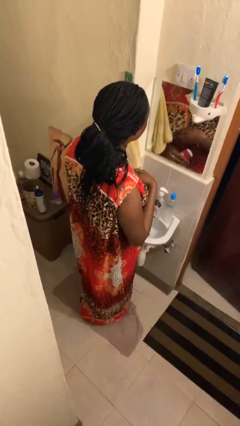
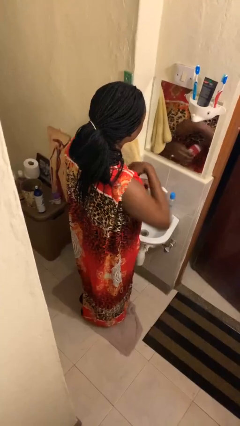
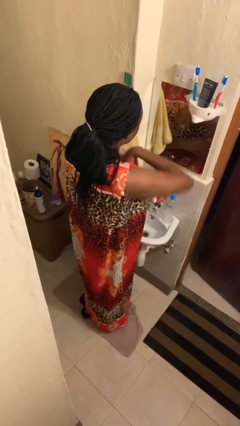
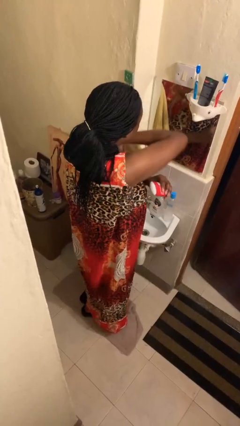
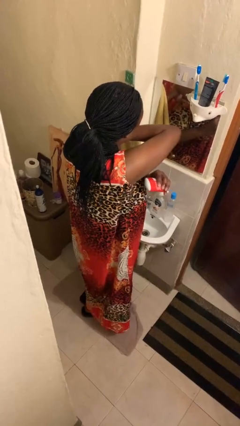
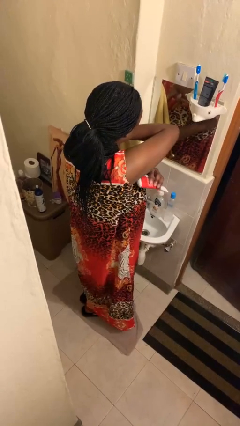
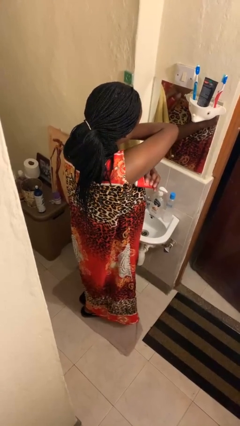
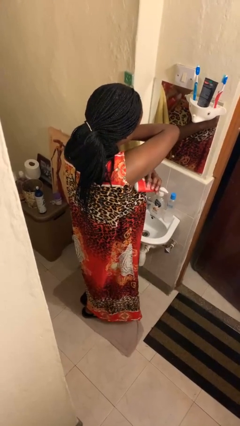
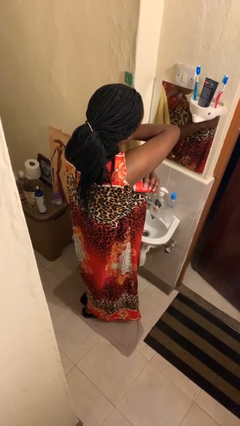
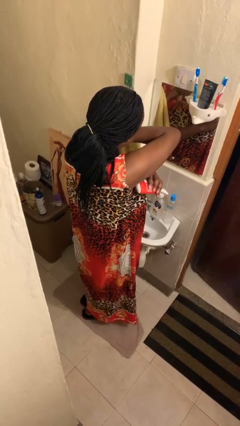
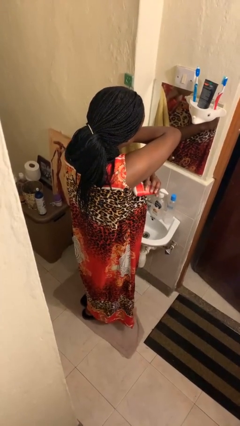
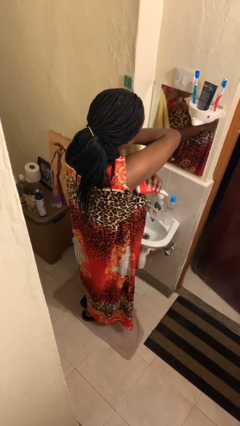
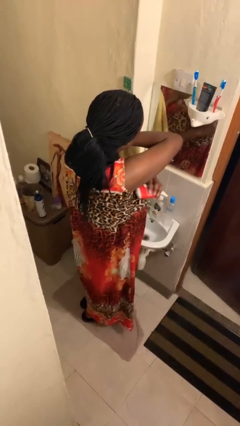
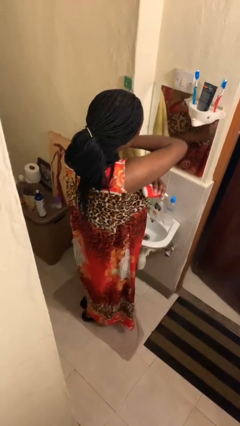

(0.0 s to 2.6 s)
person applies deodorant

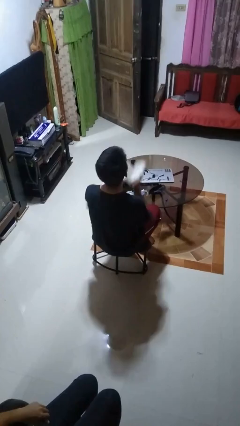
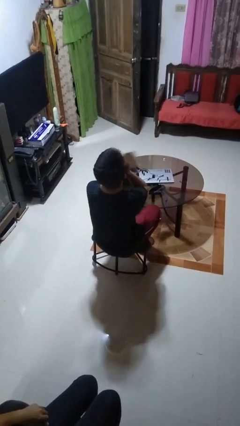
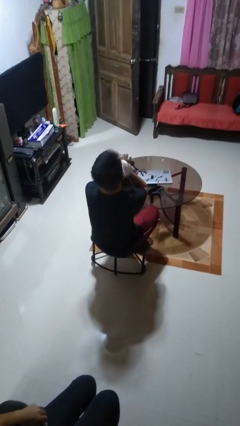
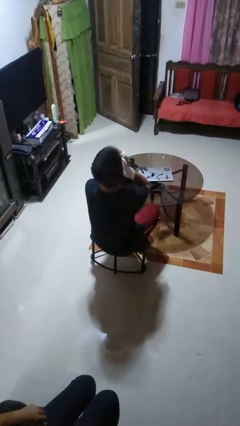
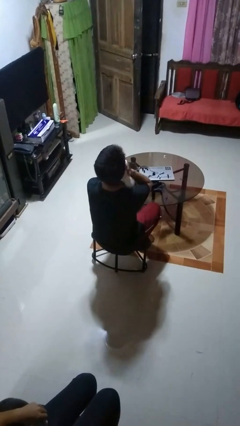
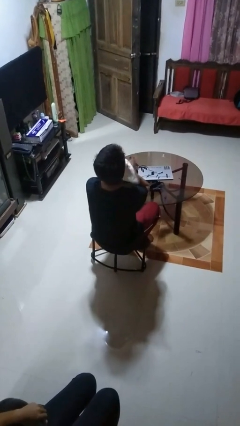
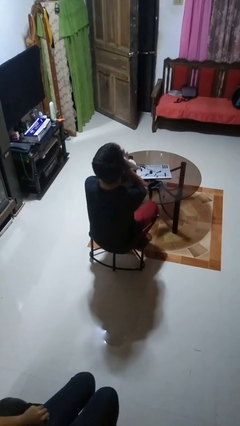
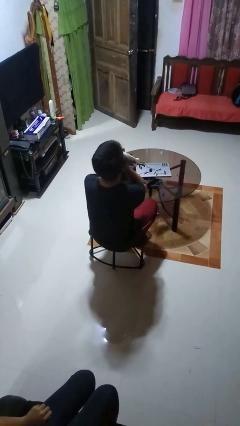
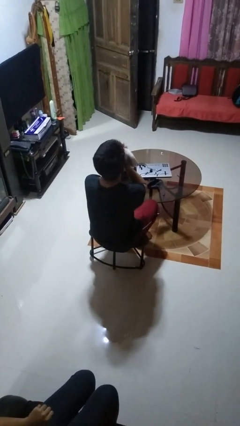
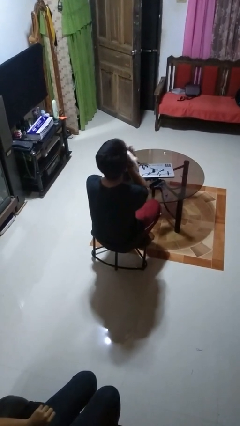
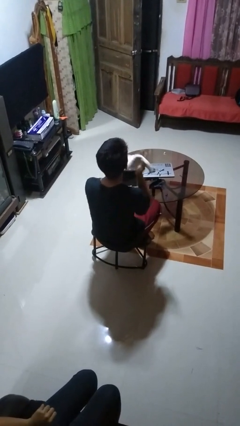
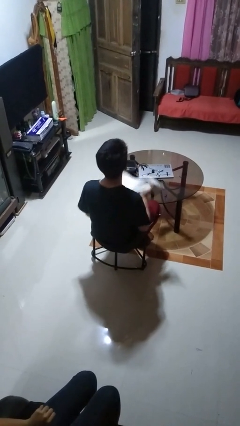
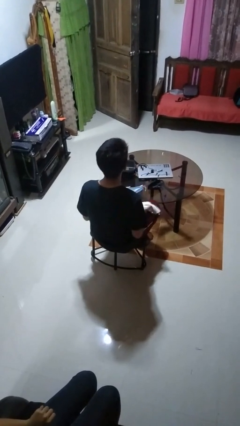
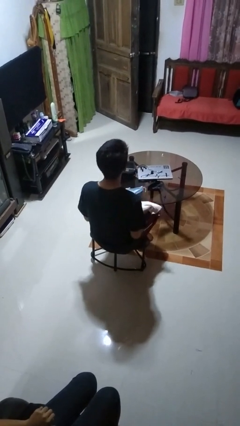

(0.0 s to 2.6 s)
person wipes mouth with napkin

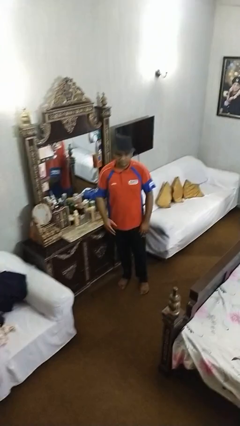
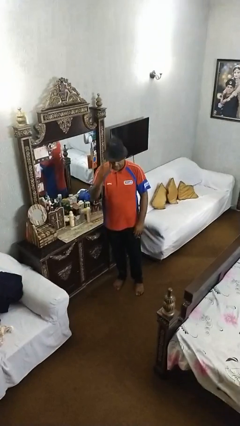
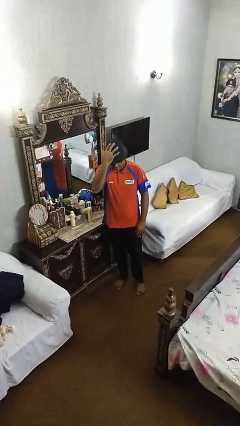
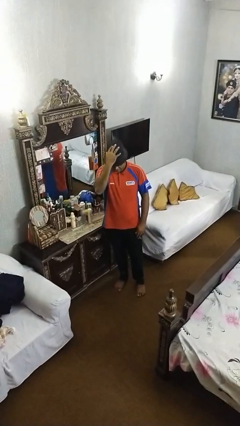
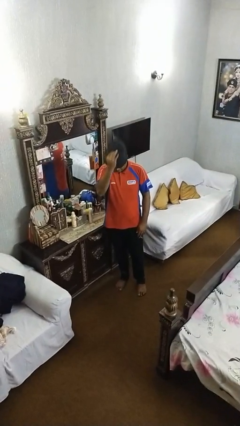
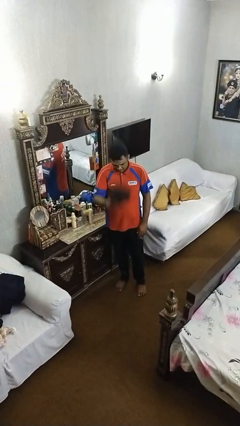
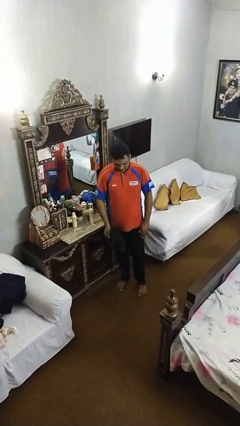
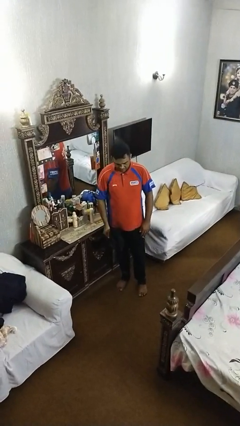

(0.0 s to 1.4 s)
person takes off hat

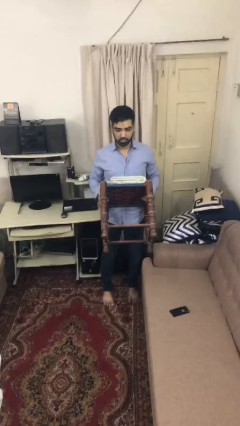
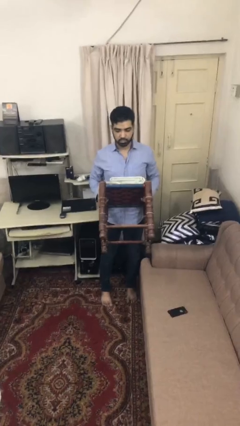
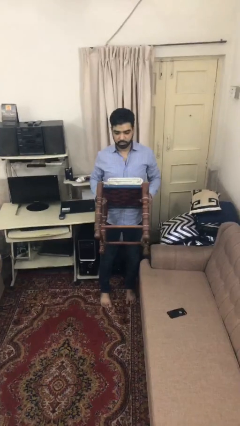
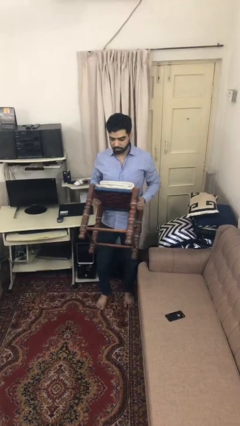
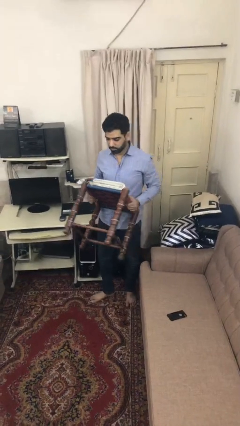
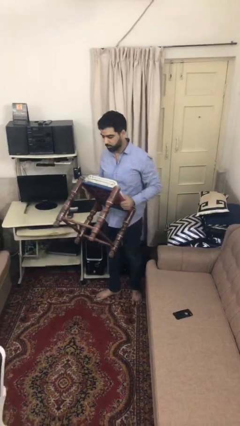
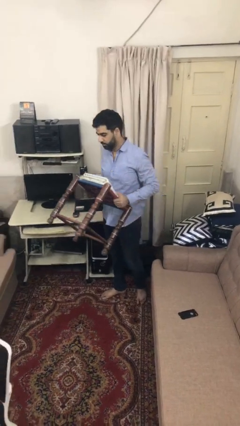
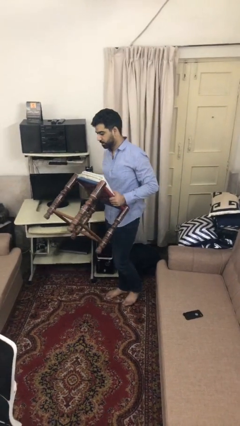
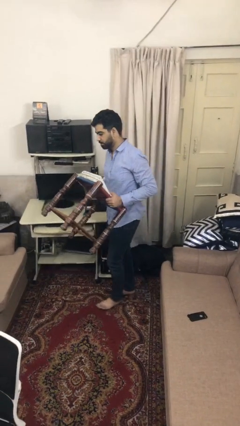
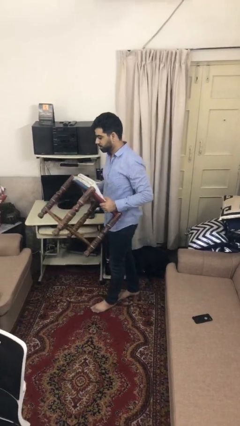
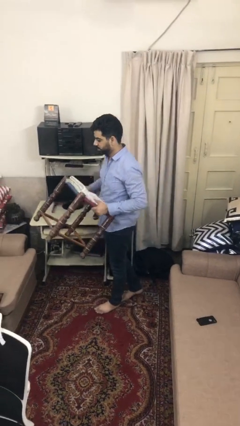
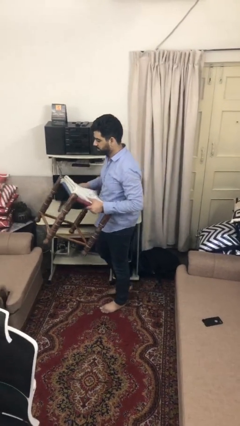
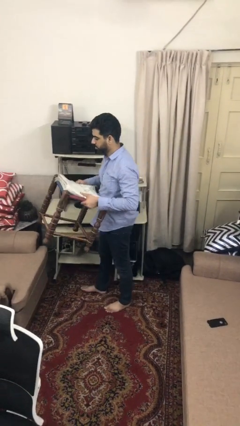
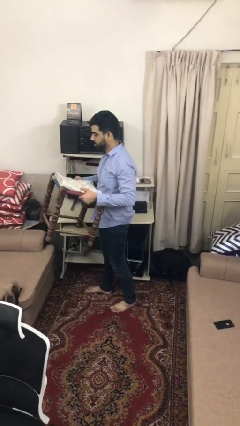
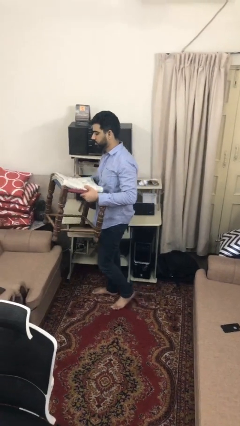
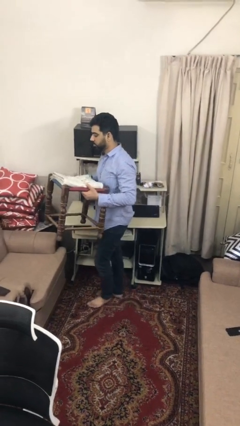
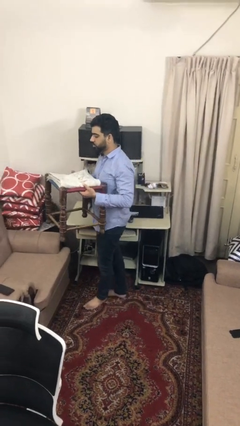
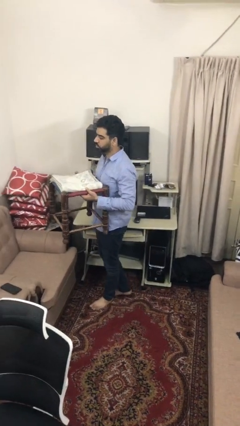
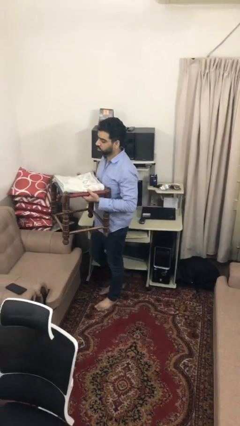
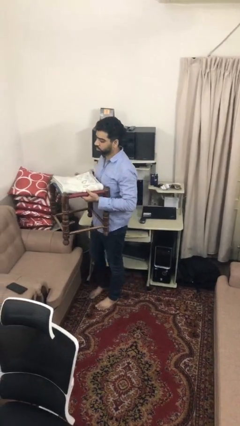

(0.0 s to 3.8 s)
person carries furniture

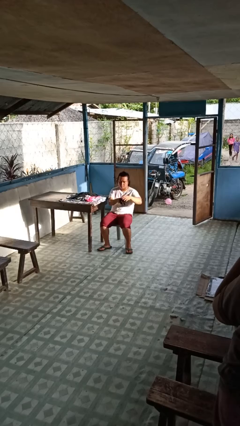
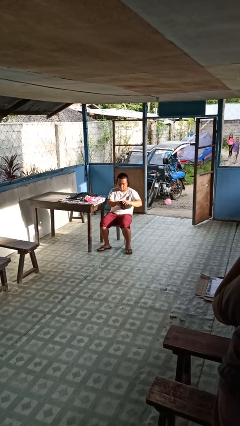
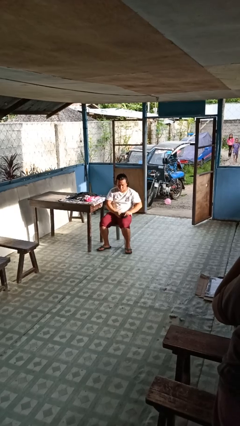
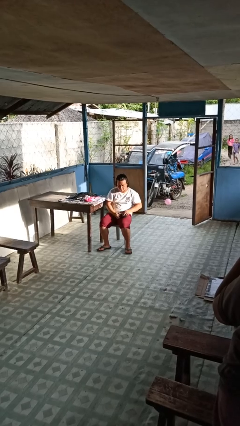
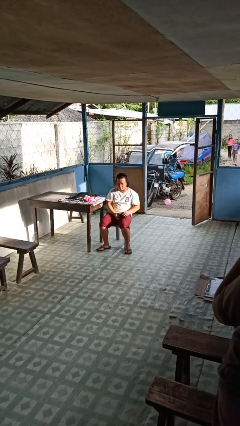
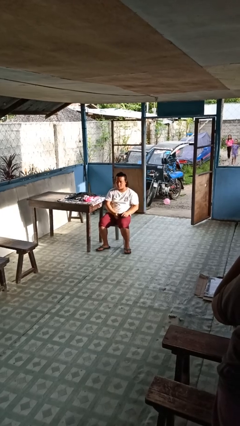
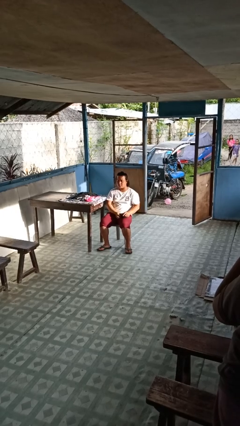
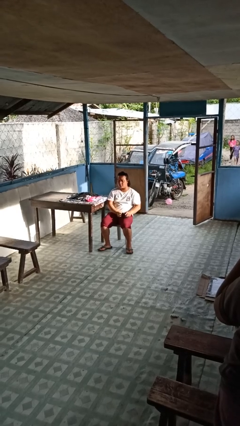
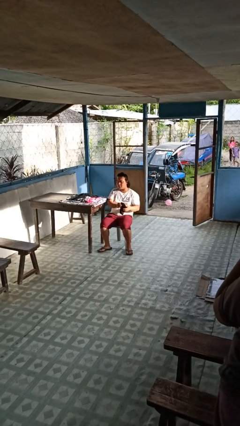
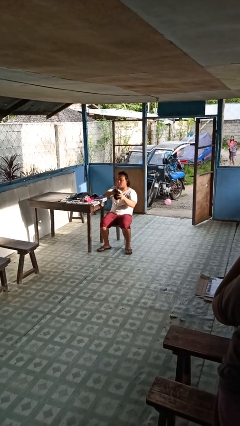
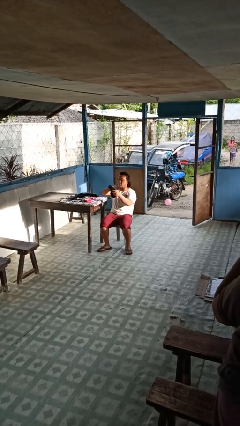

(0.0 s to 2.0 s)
person folds socks

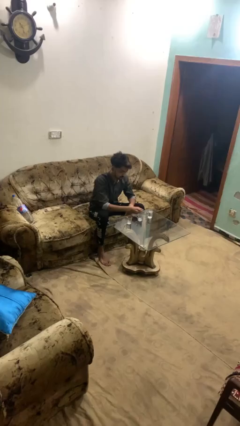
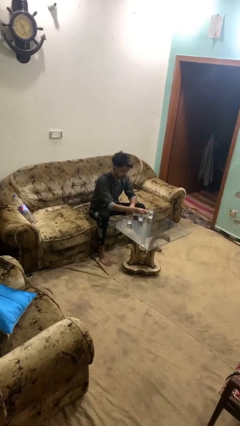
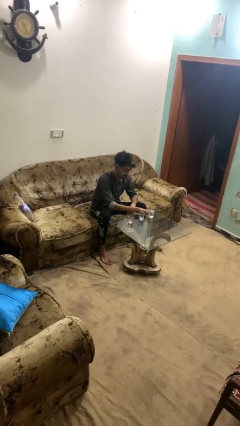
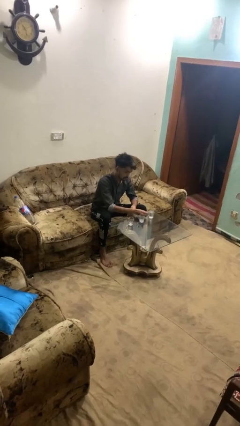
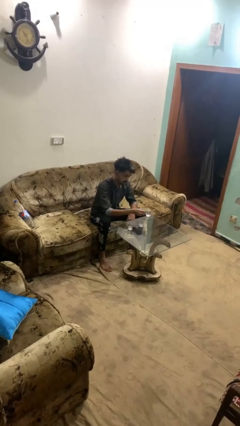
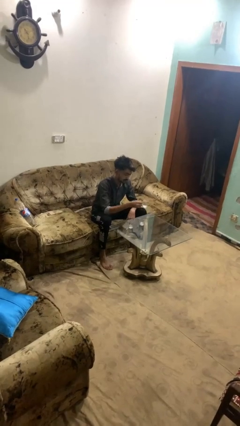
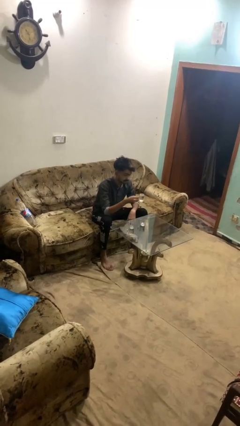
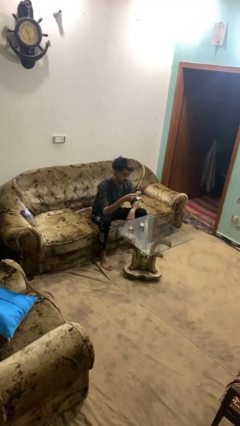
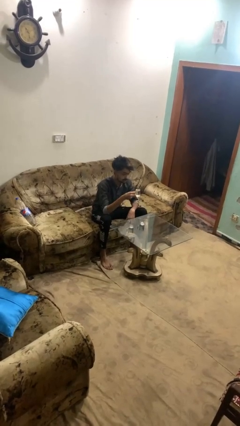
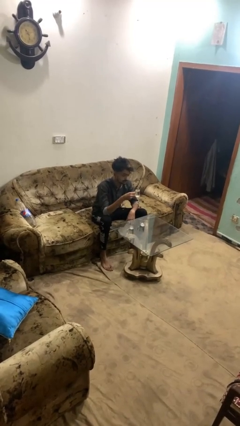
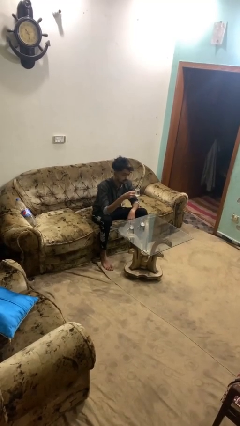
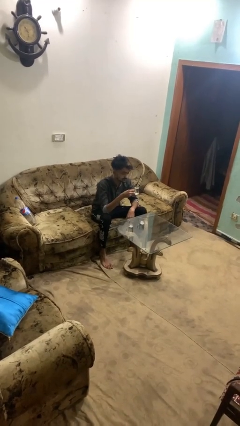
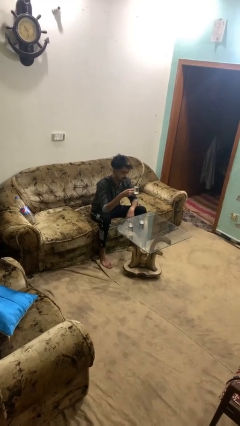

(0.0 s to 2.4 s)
person picks up object from table

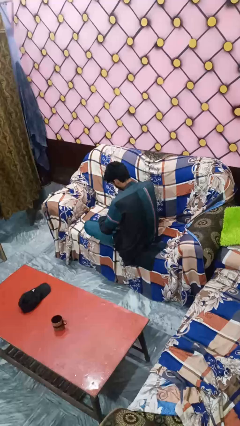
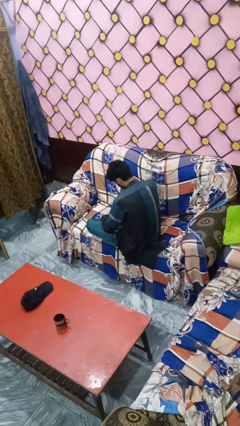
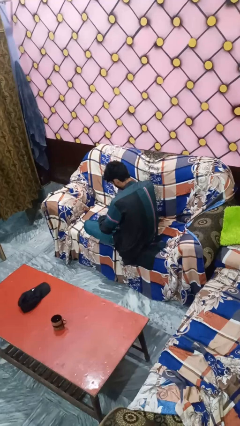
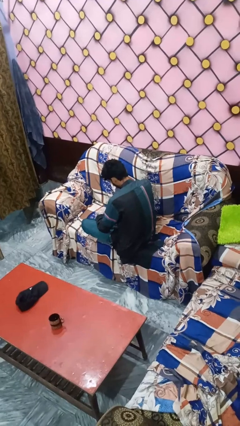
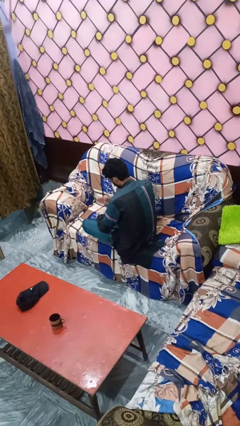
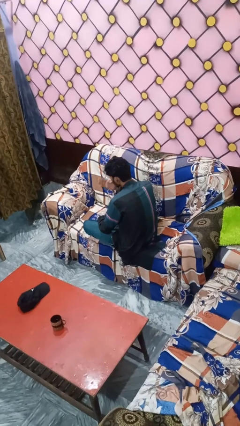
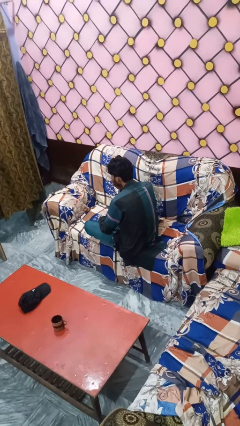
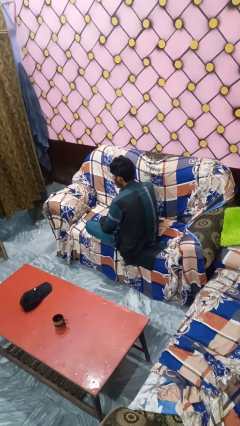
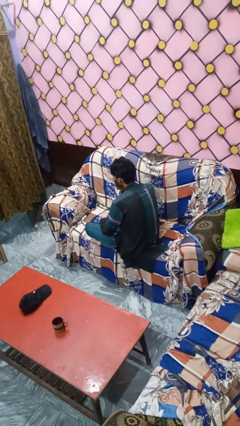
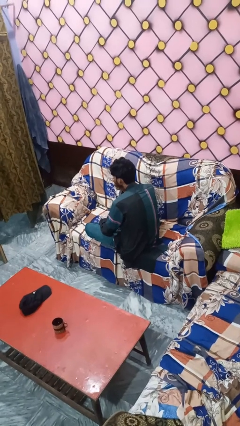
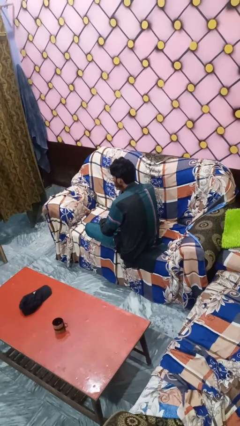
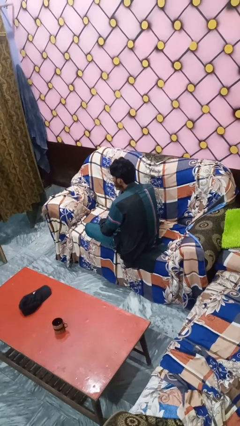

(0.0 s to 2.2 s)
person gestures blow kiss
